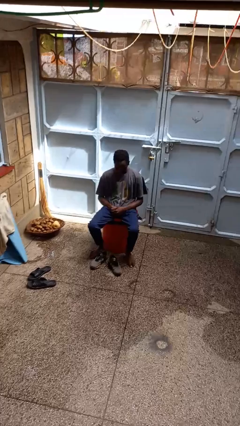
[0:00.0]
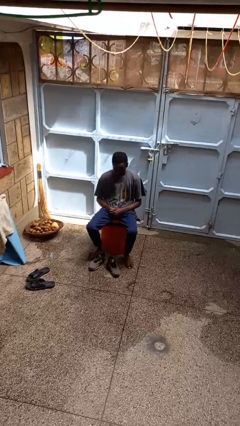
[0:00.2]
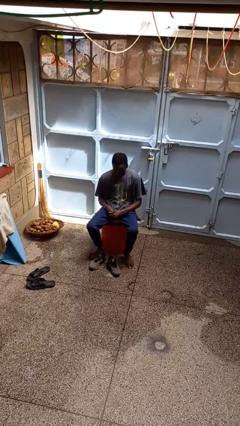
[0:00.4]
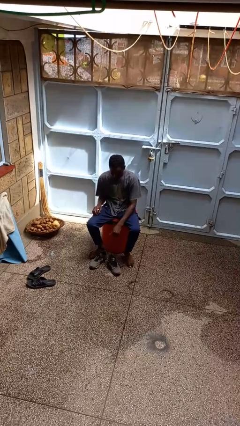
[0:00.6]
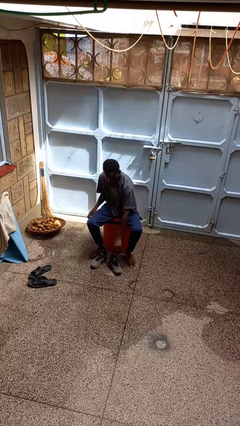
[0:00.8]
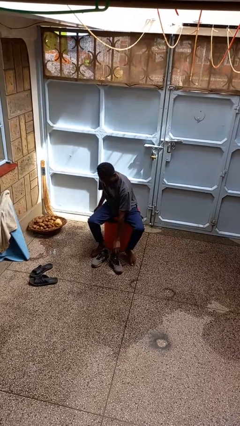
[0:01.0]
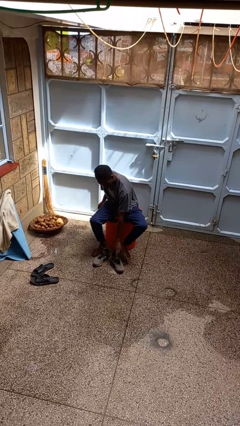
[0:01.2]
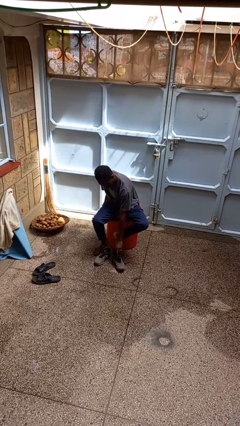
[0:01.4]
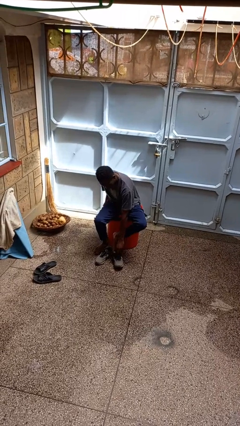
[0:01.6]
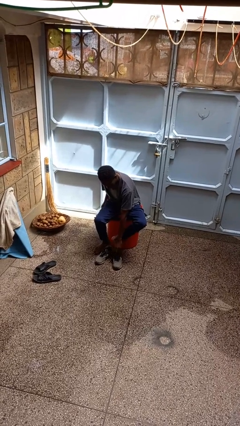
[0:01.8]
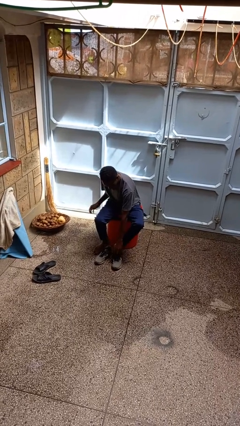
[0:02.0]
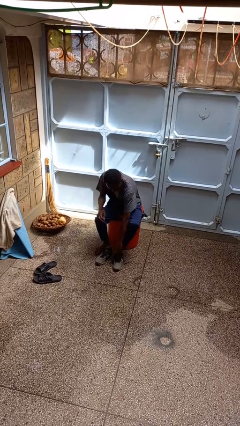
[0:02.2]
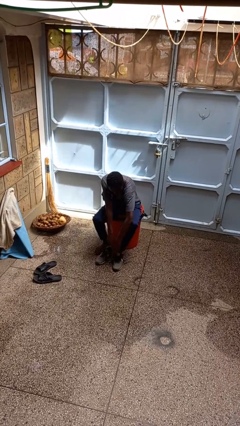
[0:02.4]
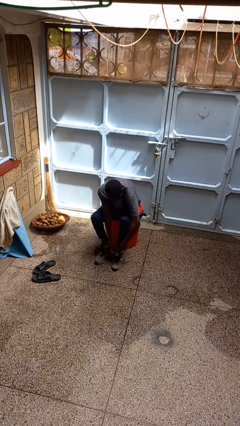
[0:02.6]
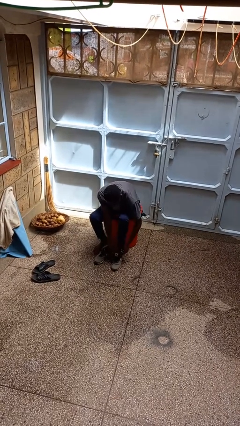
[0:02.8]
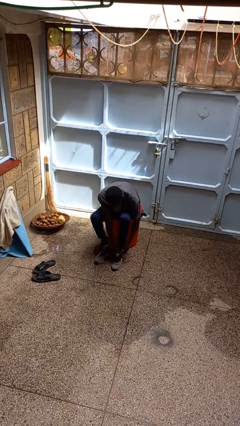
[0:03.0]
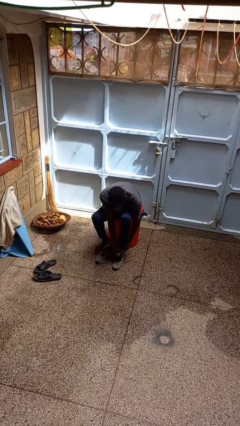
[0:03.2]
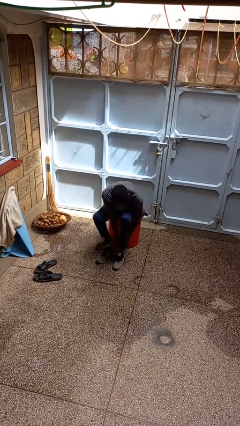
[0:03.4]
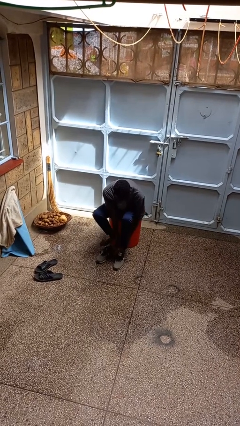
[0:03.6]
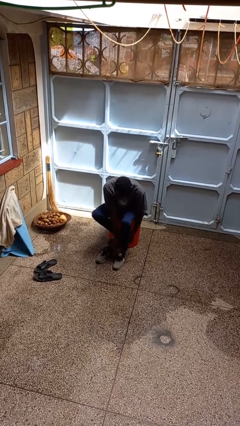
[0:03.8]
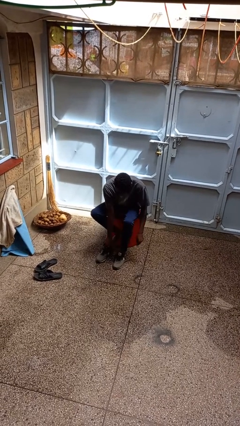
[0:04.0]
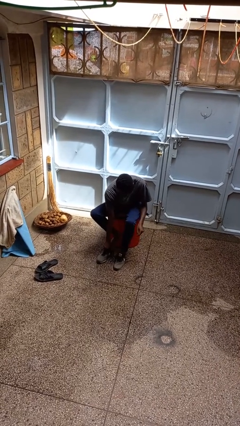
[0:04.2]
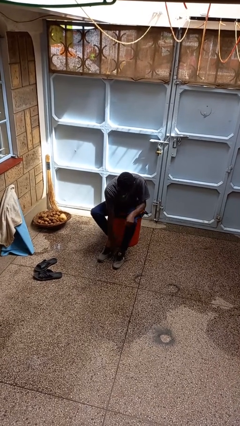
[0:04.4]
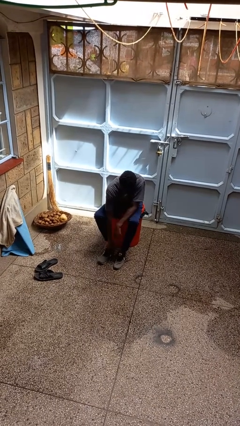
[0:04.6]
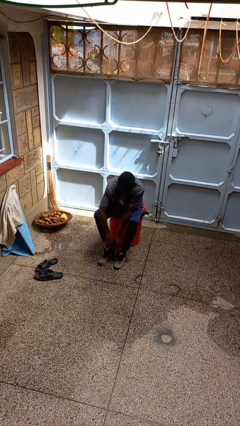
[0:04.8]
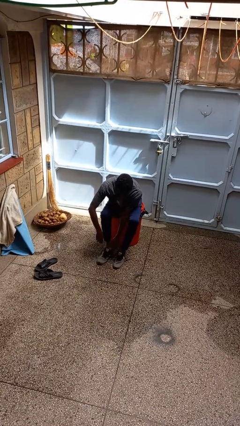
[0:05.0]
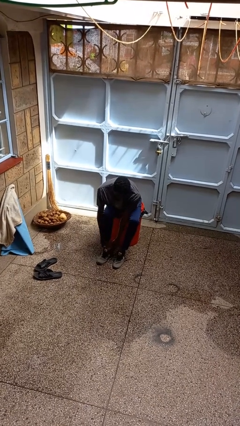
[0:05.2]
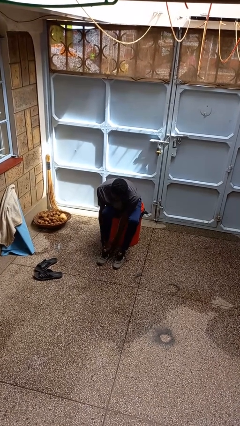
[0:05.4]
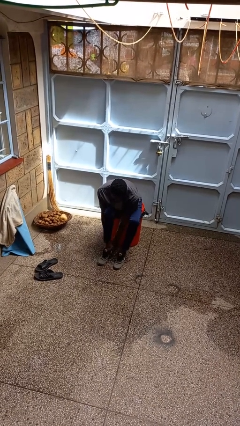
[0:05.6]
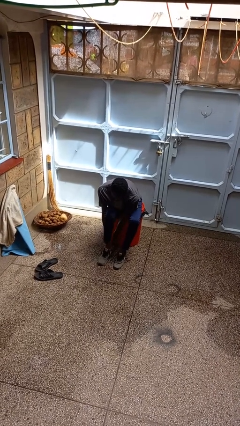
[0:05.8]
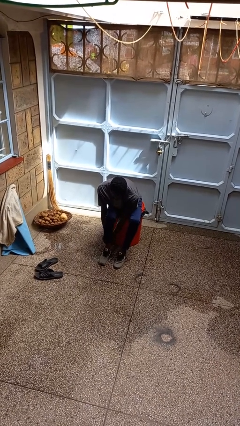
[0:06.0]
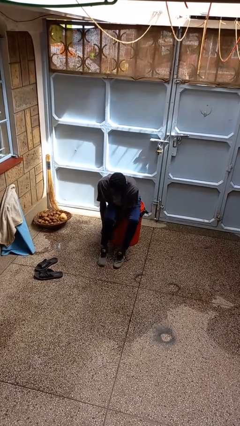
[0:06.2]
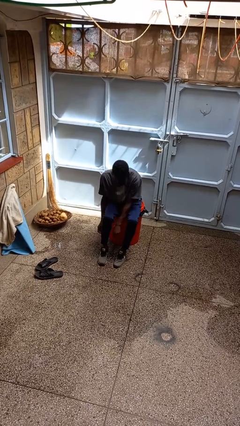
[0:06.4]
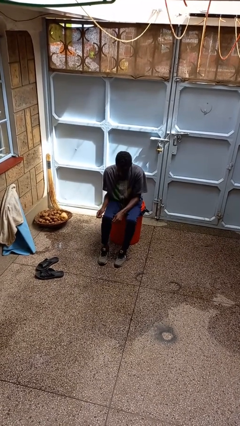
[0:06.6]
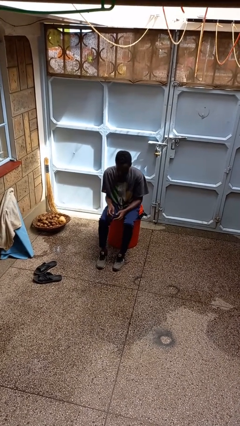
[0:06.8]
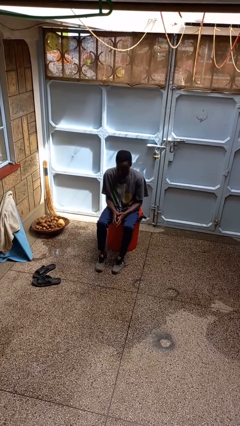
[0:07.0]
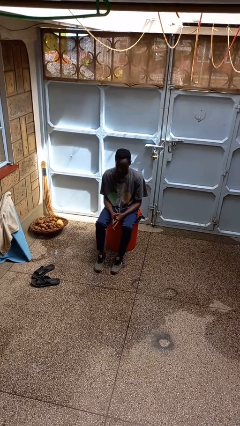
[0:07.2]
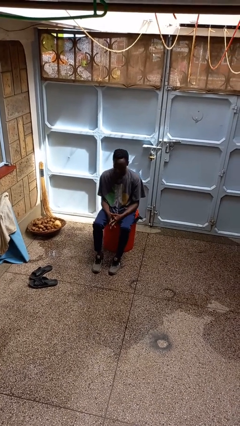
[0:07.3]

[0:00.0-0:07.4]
person puts on shoes

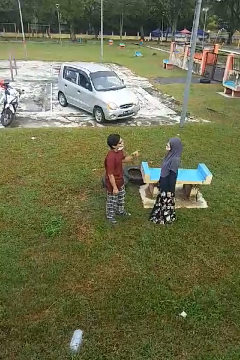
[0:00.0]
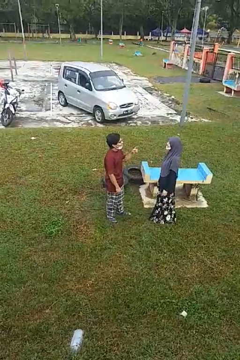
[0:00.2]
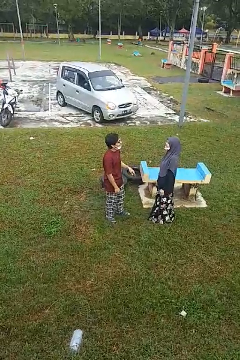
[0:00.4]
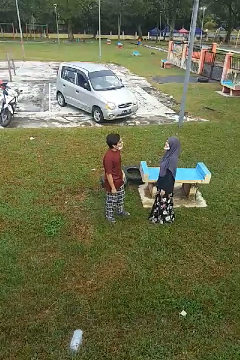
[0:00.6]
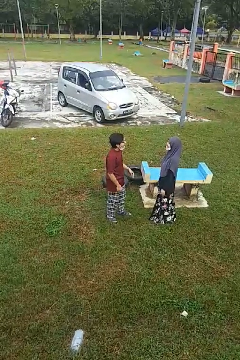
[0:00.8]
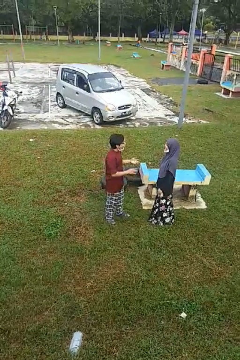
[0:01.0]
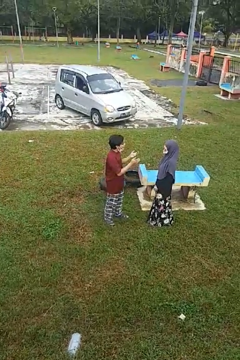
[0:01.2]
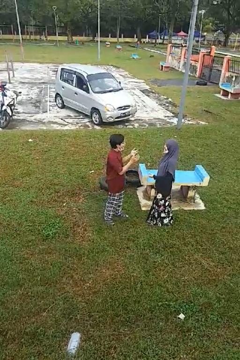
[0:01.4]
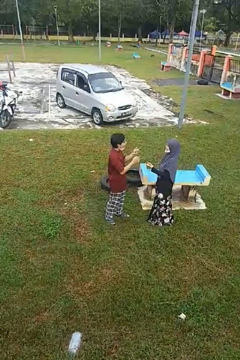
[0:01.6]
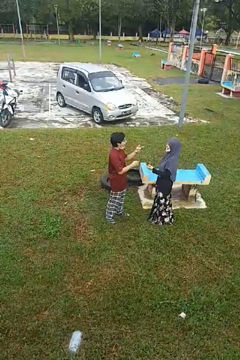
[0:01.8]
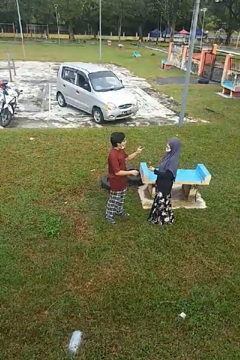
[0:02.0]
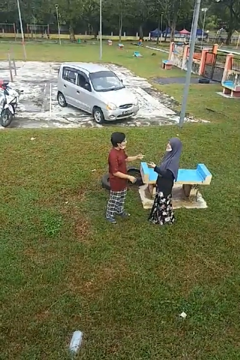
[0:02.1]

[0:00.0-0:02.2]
person laughs with person

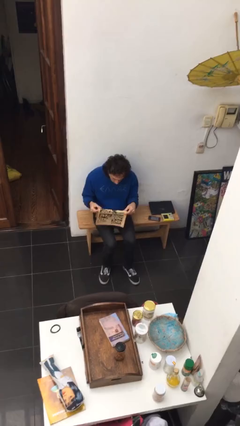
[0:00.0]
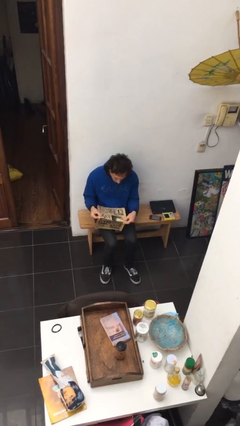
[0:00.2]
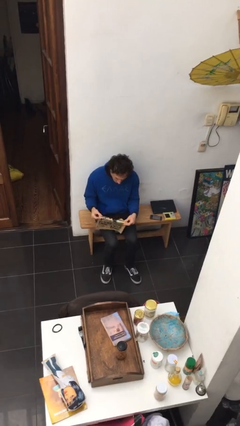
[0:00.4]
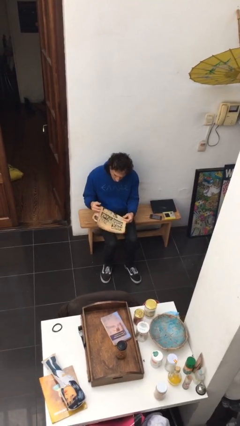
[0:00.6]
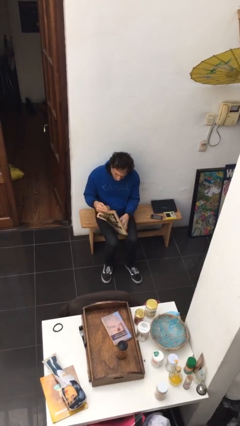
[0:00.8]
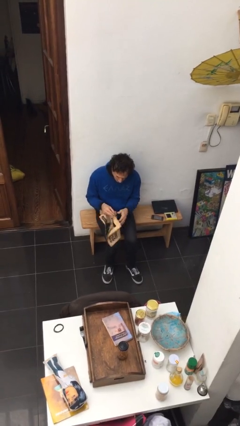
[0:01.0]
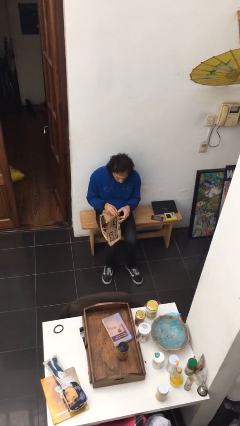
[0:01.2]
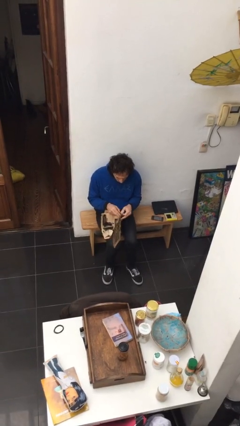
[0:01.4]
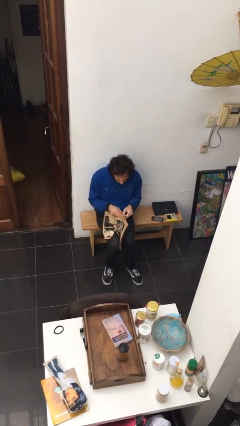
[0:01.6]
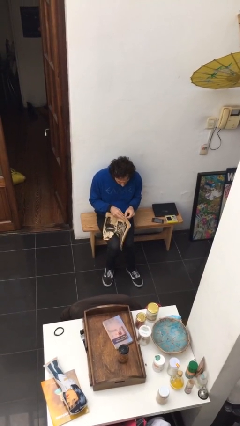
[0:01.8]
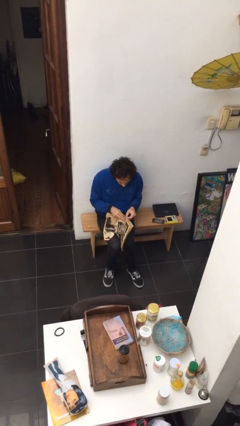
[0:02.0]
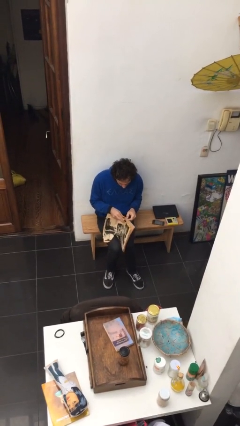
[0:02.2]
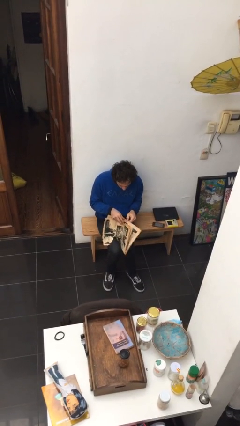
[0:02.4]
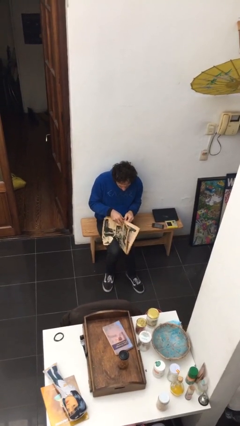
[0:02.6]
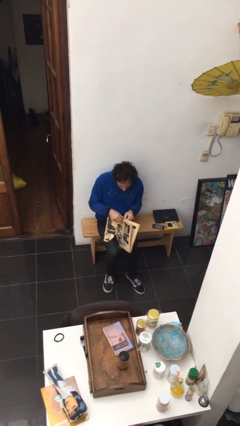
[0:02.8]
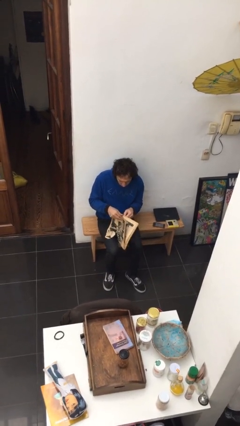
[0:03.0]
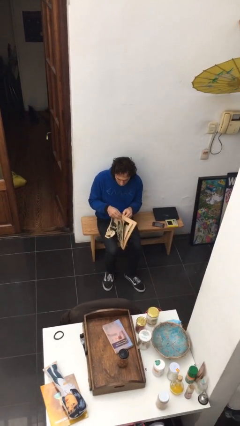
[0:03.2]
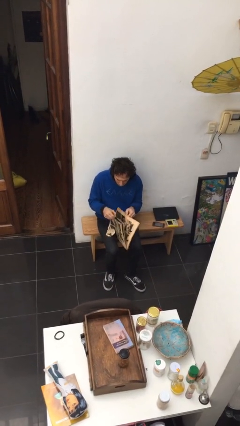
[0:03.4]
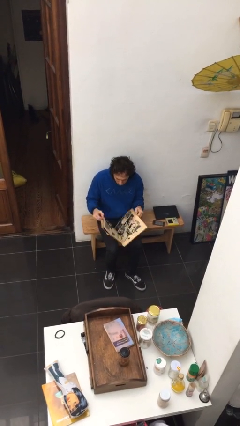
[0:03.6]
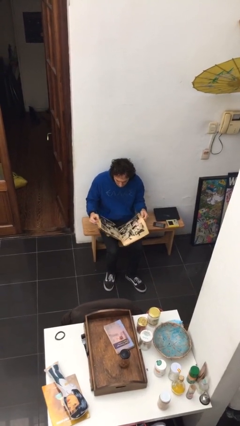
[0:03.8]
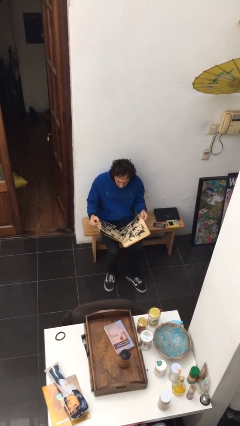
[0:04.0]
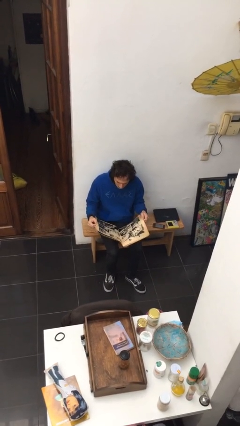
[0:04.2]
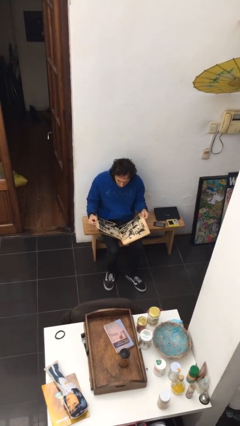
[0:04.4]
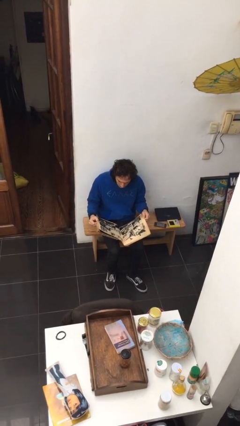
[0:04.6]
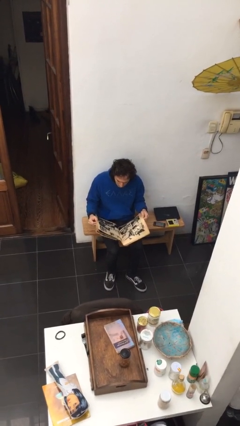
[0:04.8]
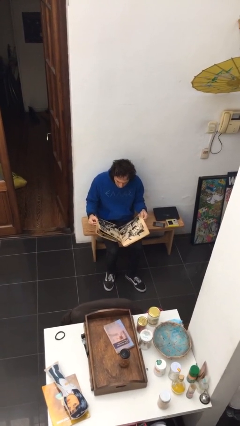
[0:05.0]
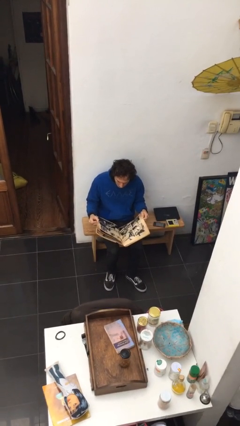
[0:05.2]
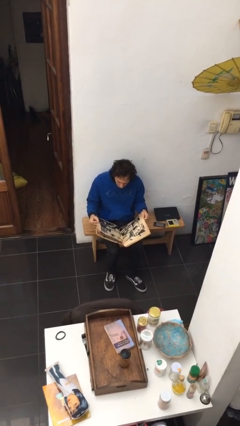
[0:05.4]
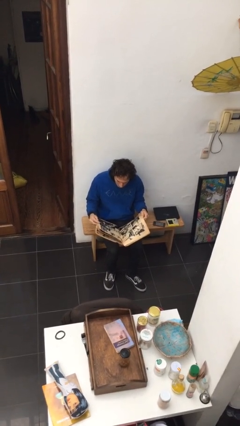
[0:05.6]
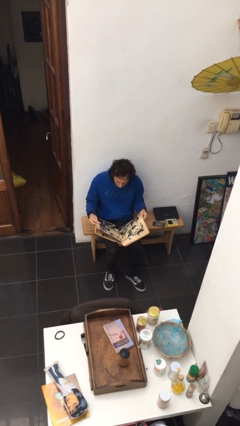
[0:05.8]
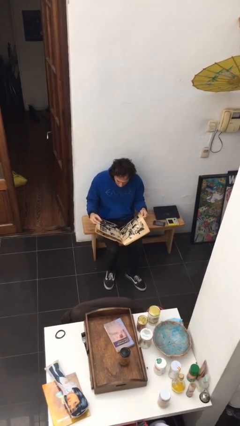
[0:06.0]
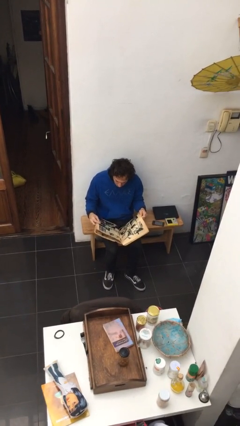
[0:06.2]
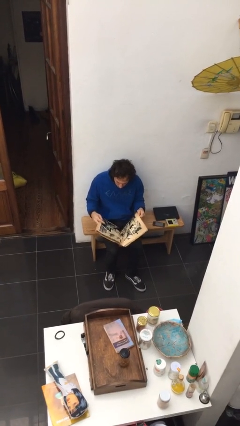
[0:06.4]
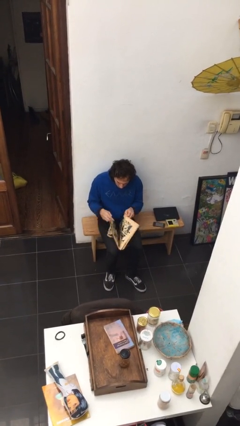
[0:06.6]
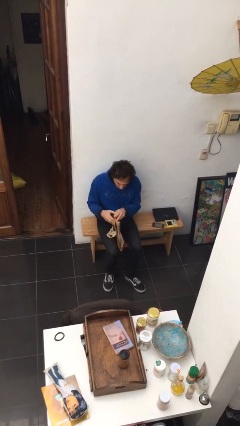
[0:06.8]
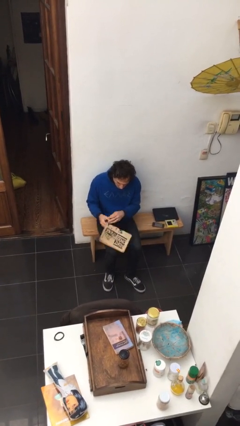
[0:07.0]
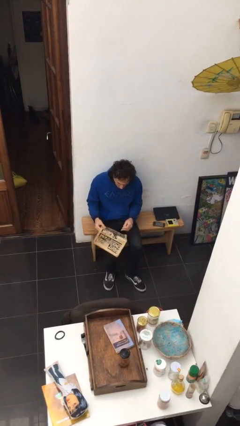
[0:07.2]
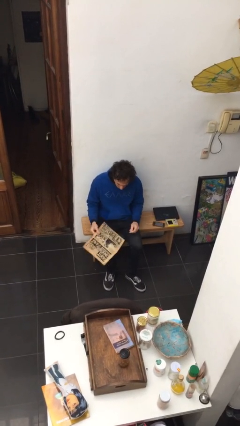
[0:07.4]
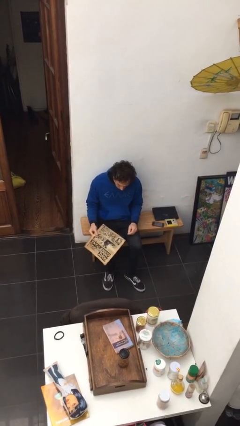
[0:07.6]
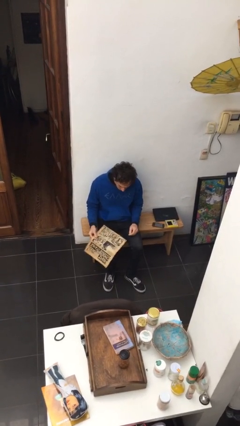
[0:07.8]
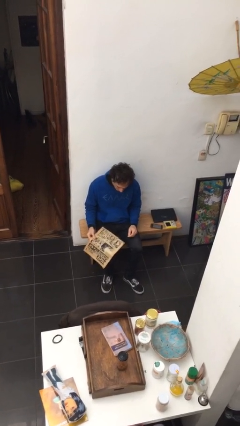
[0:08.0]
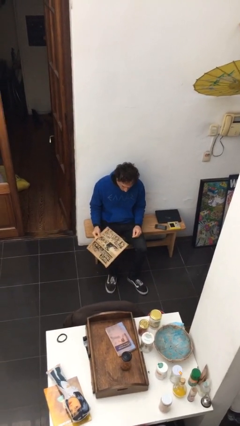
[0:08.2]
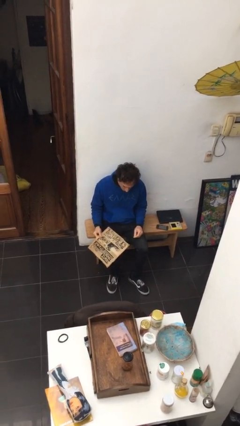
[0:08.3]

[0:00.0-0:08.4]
person reads newspaper
